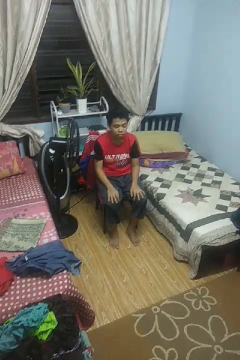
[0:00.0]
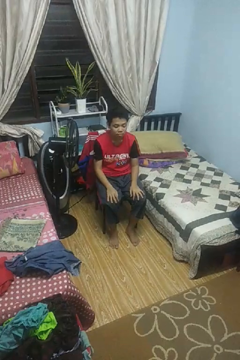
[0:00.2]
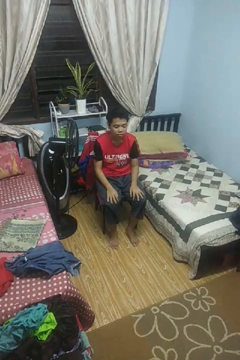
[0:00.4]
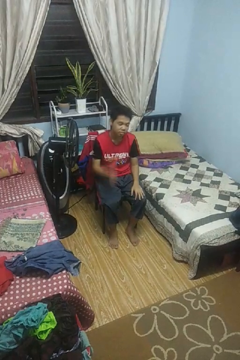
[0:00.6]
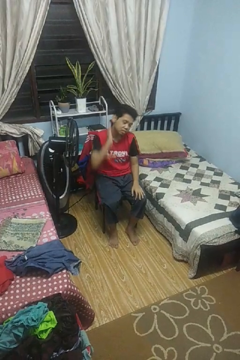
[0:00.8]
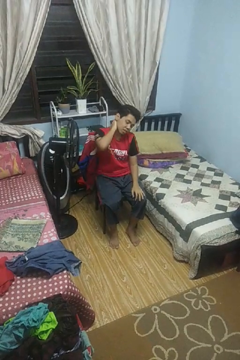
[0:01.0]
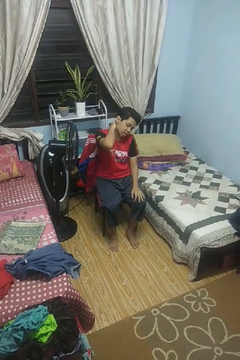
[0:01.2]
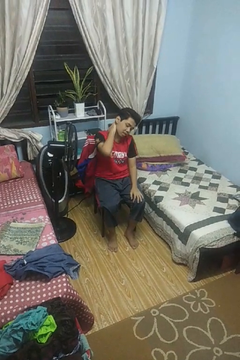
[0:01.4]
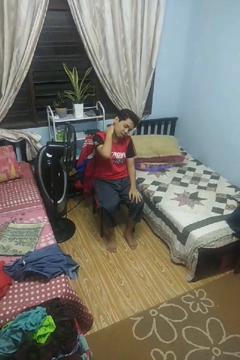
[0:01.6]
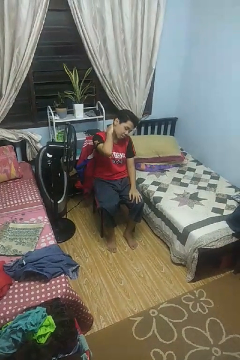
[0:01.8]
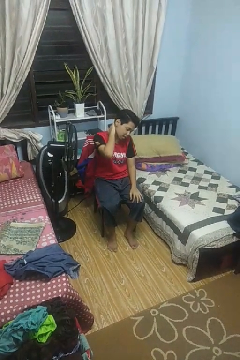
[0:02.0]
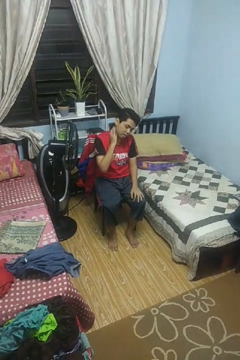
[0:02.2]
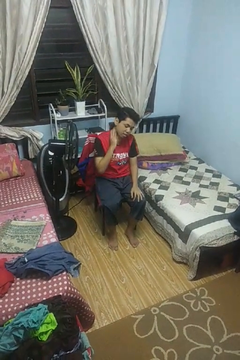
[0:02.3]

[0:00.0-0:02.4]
person rubs neck

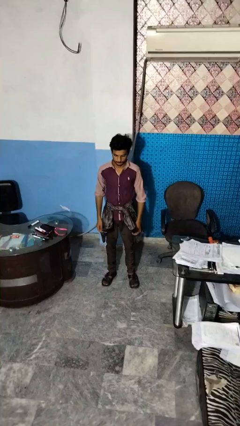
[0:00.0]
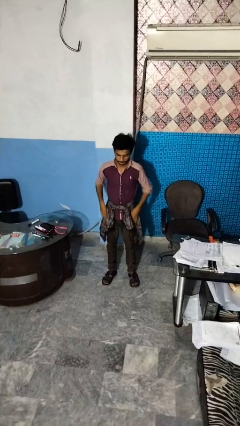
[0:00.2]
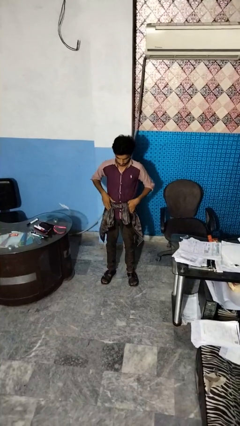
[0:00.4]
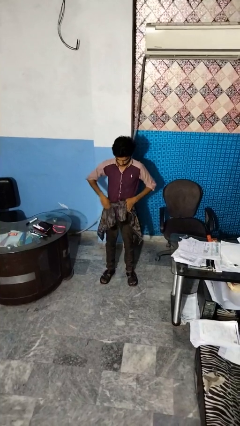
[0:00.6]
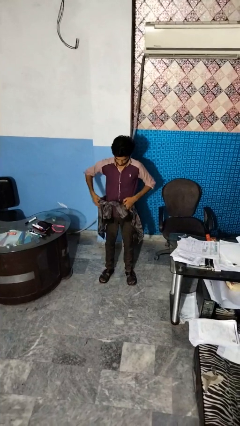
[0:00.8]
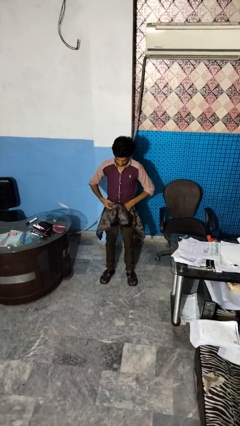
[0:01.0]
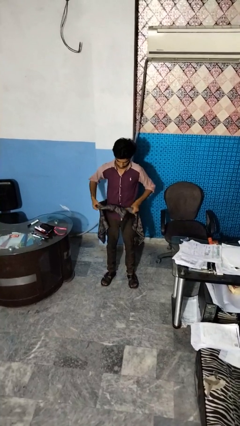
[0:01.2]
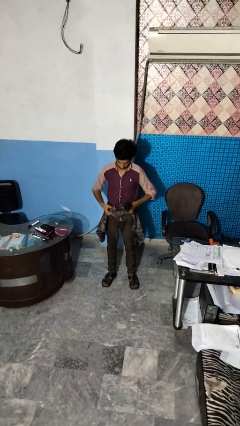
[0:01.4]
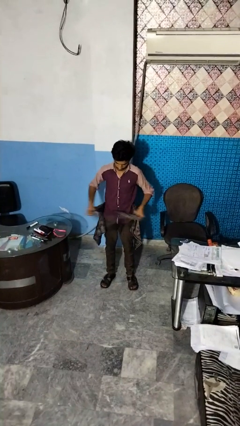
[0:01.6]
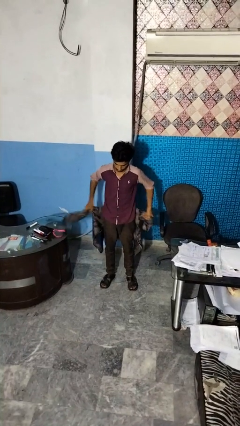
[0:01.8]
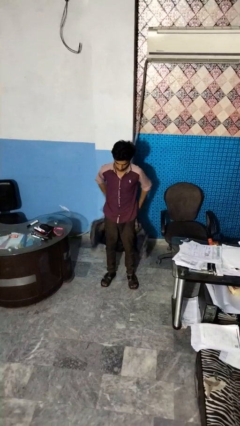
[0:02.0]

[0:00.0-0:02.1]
person unties jacket around waist

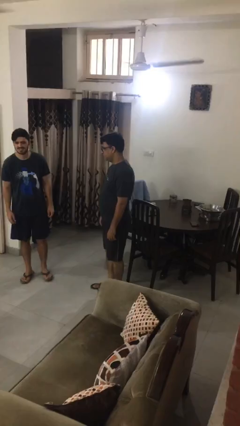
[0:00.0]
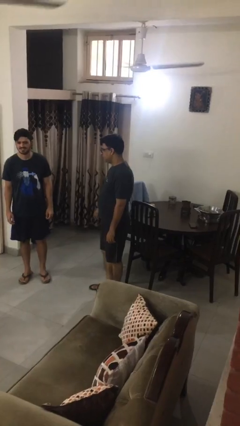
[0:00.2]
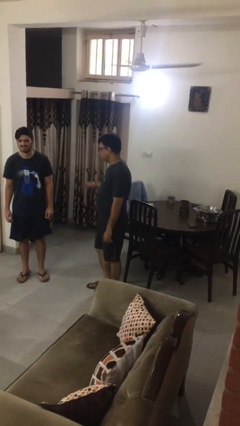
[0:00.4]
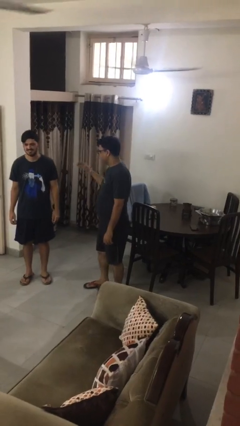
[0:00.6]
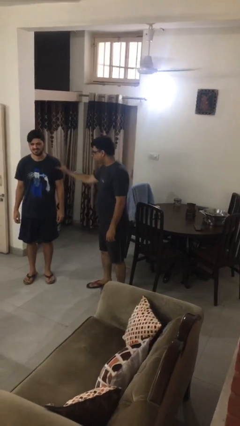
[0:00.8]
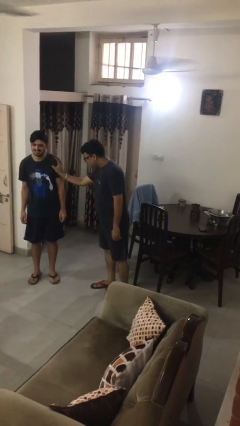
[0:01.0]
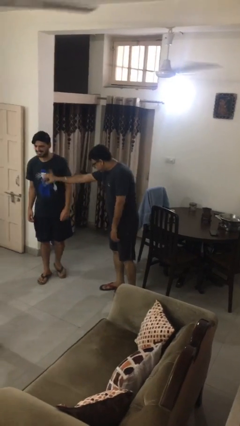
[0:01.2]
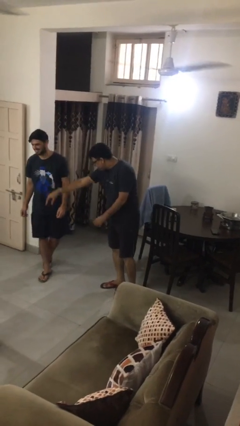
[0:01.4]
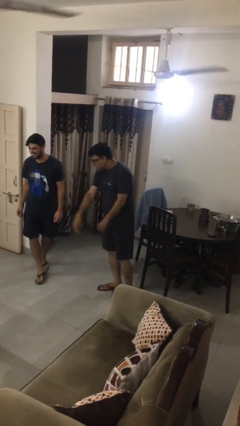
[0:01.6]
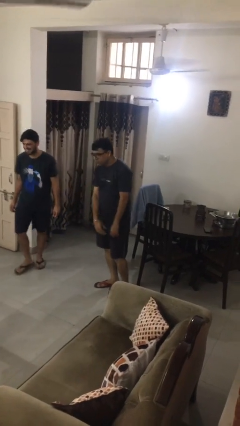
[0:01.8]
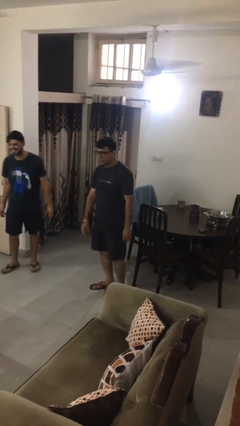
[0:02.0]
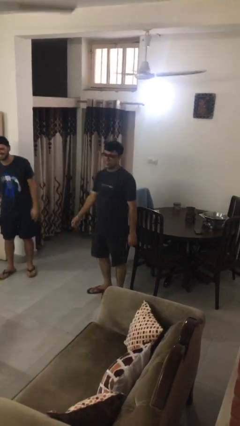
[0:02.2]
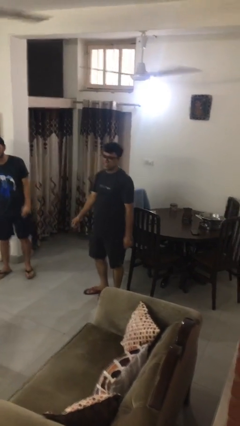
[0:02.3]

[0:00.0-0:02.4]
person shoves person

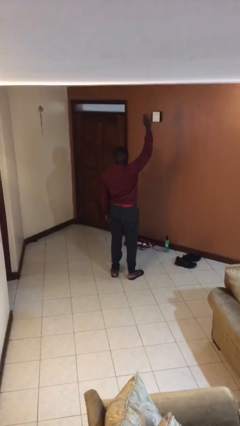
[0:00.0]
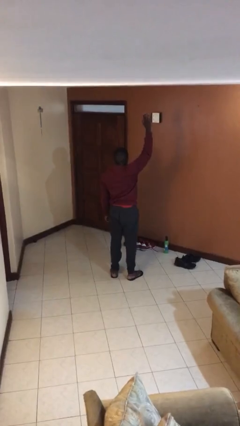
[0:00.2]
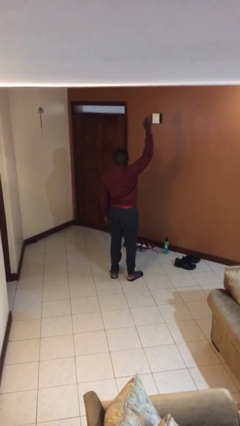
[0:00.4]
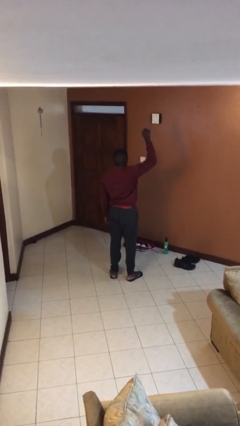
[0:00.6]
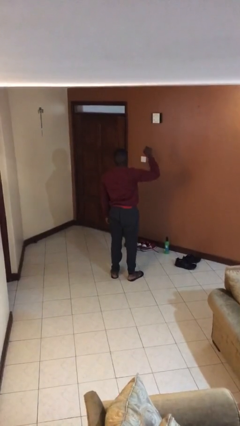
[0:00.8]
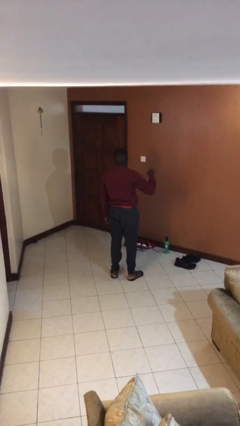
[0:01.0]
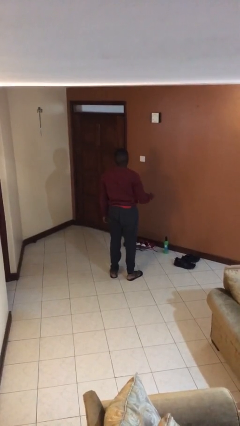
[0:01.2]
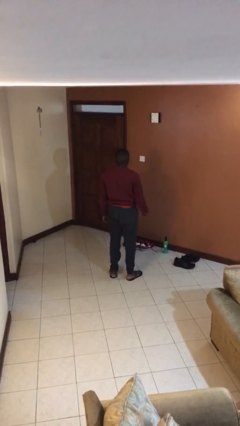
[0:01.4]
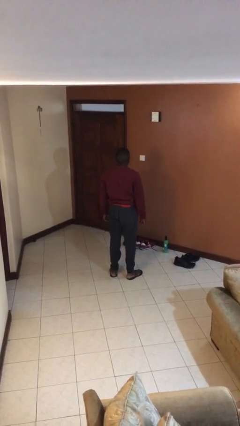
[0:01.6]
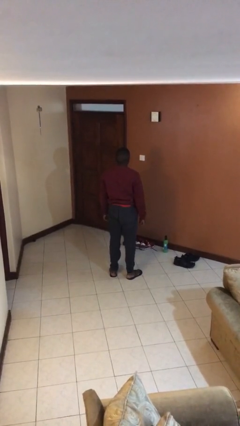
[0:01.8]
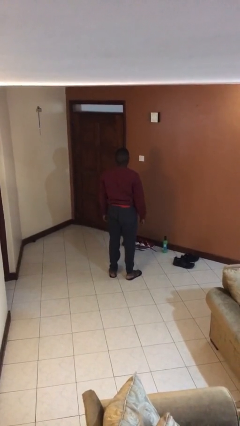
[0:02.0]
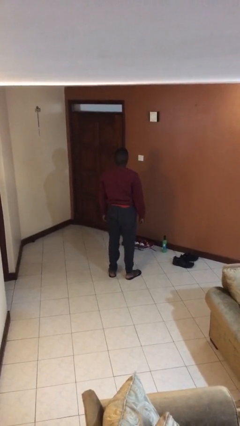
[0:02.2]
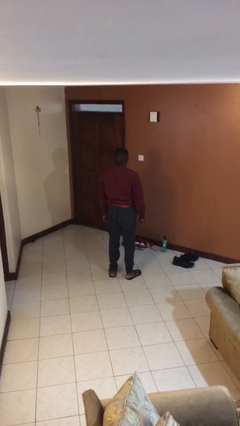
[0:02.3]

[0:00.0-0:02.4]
person gestures lower hand

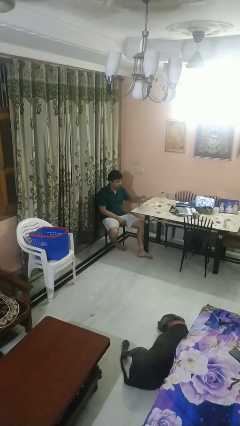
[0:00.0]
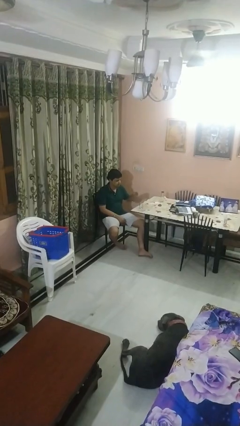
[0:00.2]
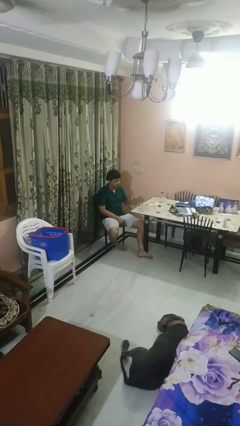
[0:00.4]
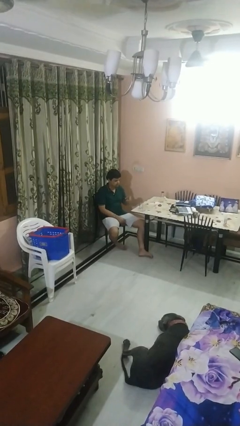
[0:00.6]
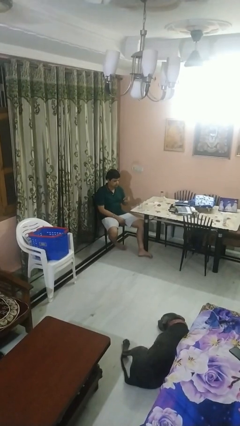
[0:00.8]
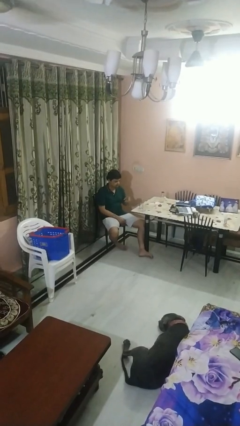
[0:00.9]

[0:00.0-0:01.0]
person picks up object from table

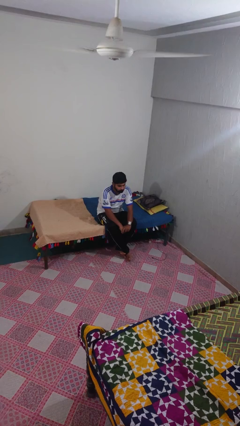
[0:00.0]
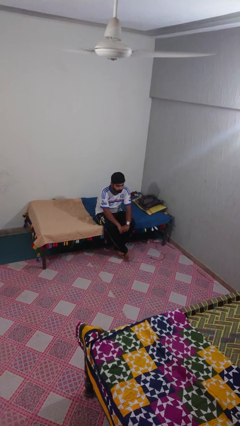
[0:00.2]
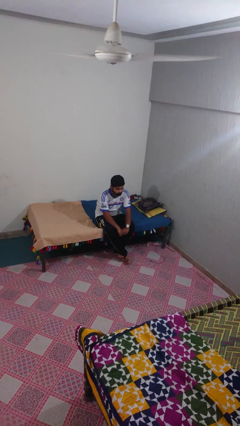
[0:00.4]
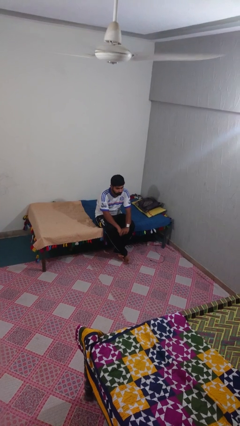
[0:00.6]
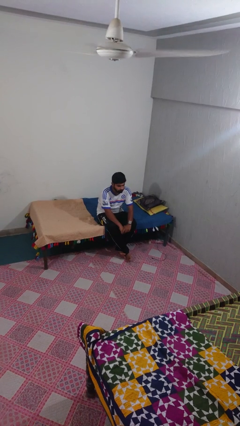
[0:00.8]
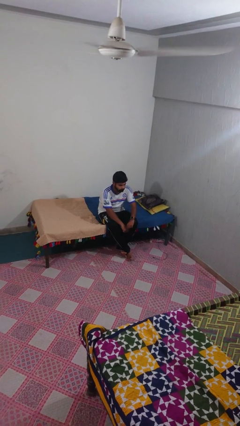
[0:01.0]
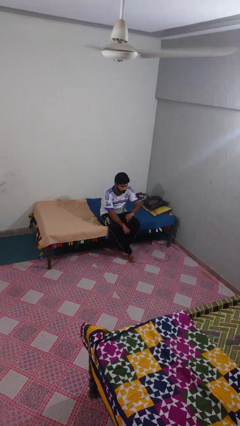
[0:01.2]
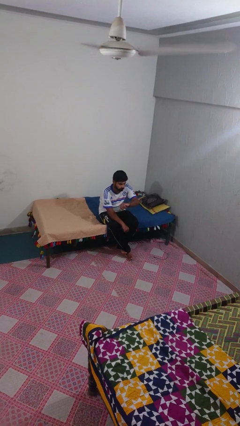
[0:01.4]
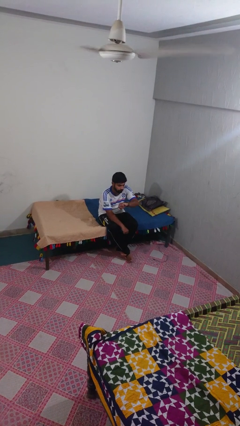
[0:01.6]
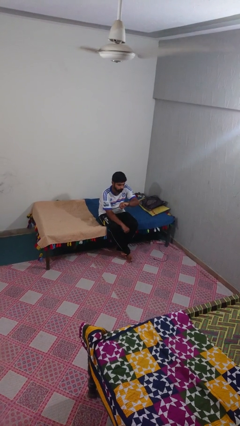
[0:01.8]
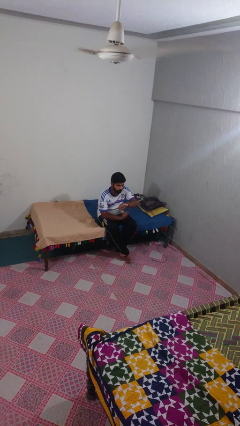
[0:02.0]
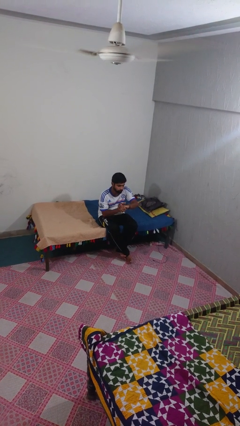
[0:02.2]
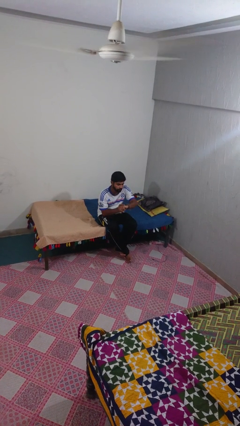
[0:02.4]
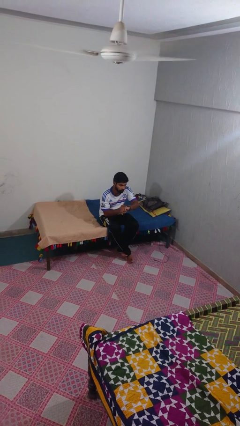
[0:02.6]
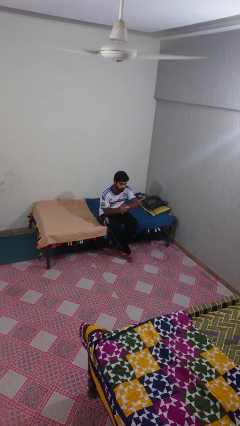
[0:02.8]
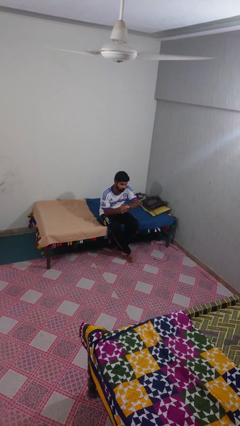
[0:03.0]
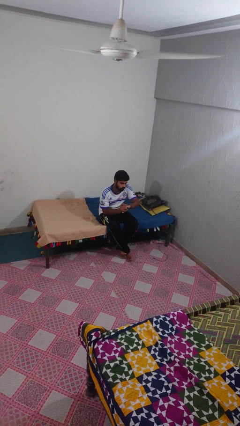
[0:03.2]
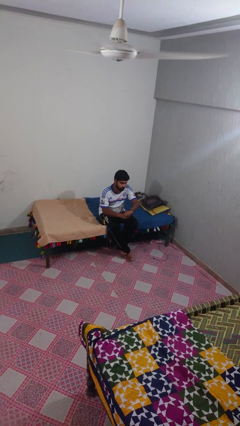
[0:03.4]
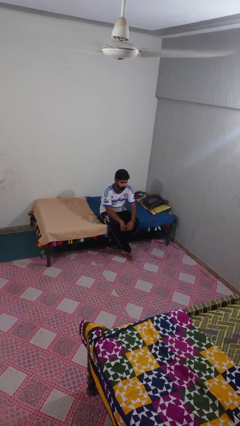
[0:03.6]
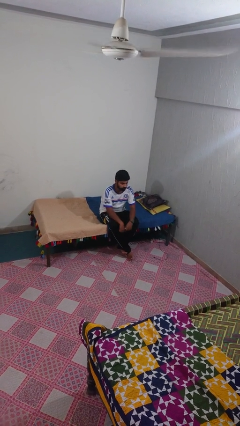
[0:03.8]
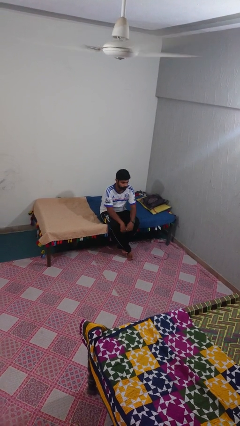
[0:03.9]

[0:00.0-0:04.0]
person looks at wristwatch

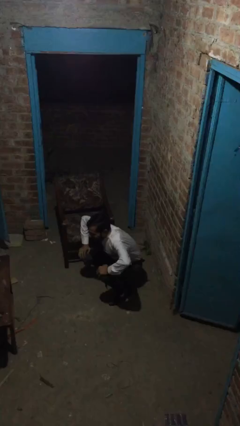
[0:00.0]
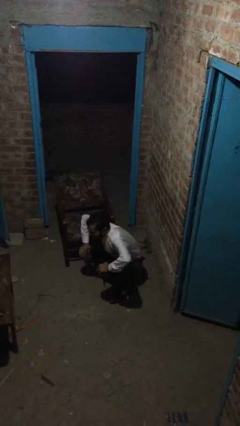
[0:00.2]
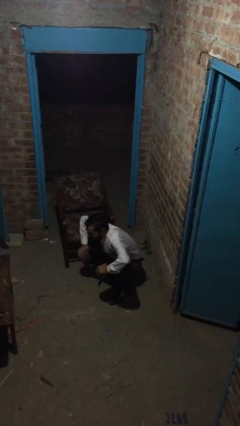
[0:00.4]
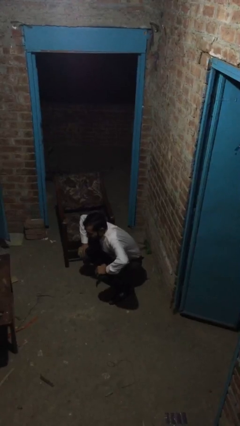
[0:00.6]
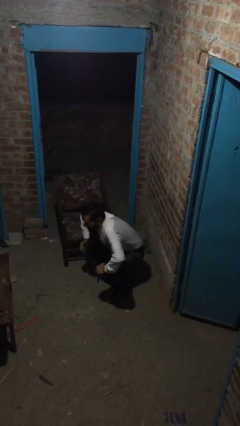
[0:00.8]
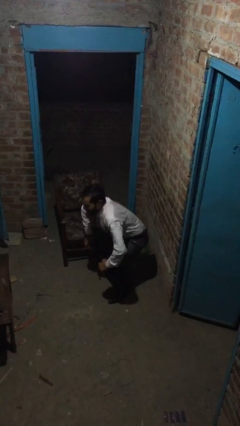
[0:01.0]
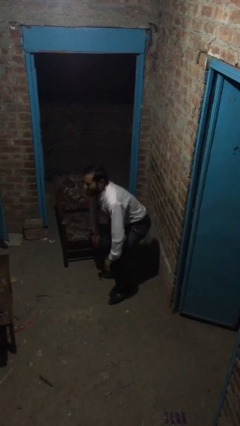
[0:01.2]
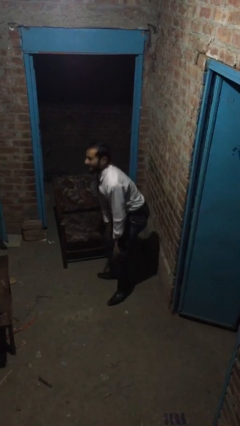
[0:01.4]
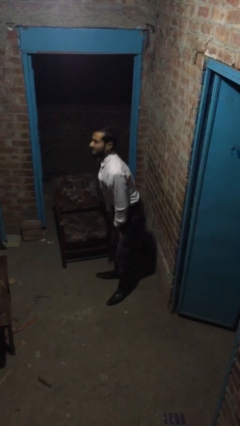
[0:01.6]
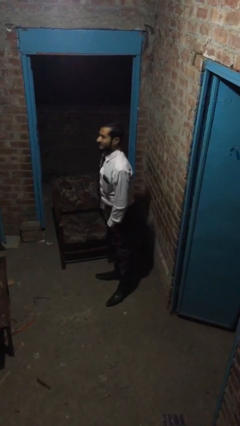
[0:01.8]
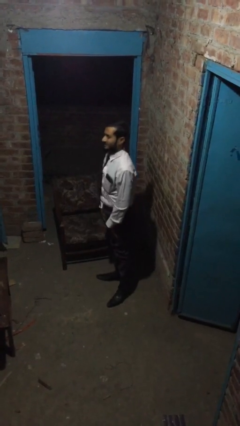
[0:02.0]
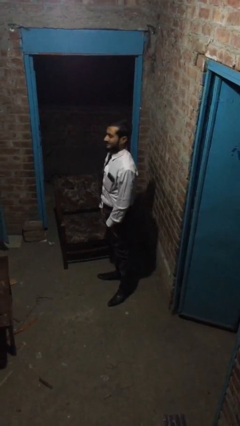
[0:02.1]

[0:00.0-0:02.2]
person stands up

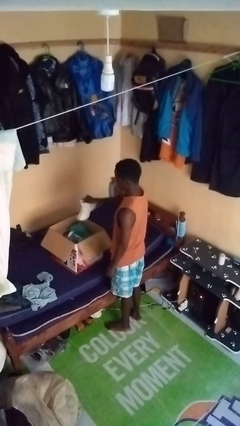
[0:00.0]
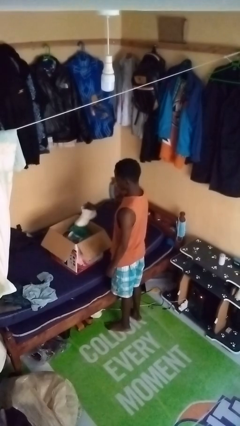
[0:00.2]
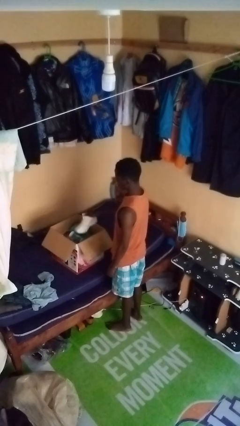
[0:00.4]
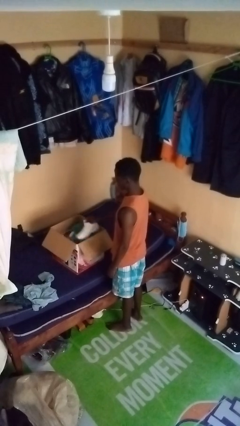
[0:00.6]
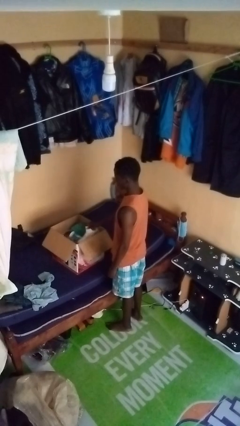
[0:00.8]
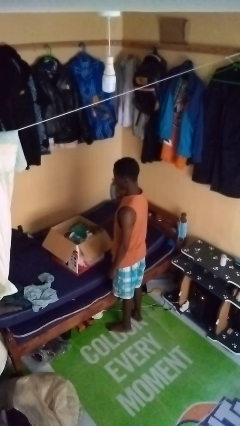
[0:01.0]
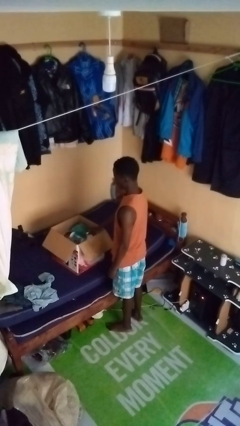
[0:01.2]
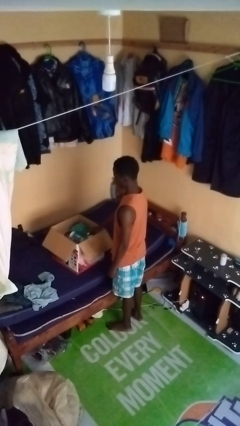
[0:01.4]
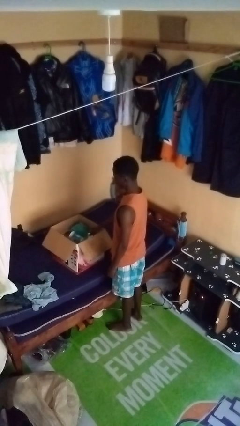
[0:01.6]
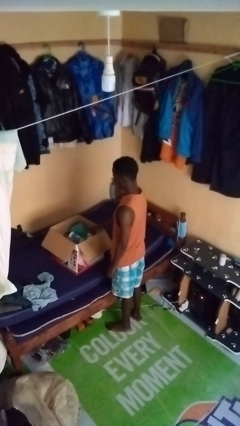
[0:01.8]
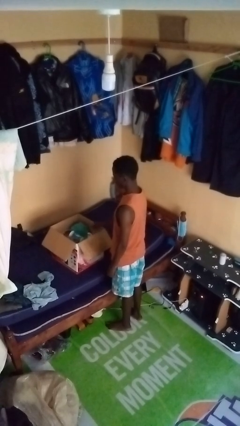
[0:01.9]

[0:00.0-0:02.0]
person puts object into box
